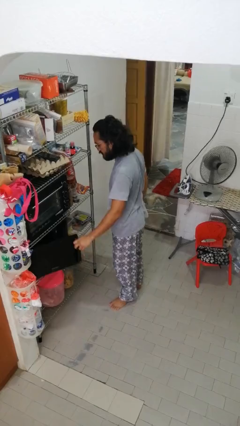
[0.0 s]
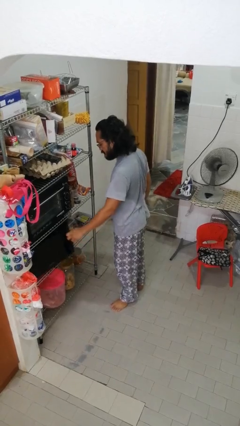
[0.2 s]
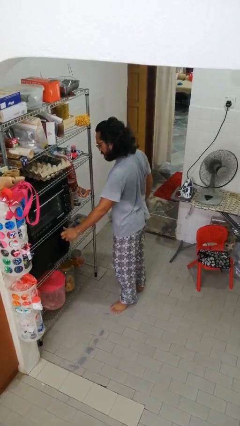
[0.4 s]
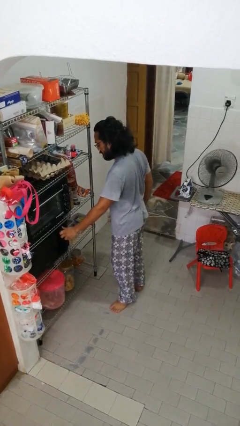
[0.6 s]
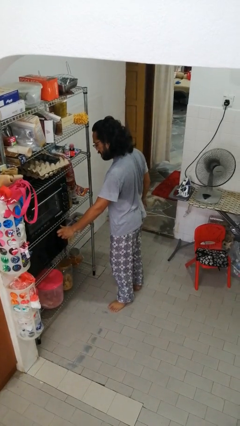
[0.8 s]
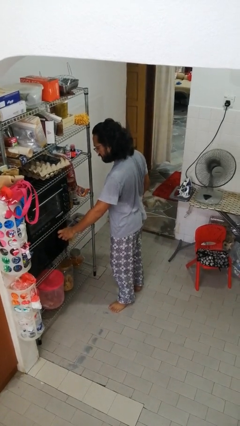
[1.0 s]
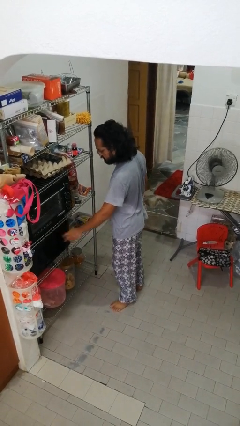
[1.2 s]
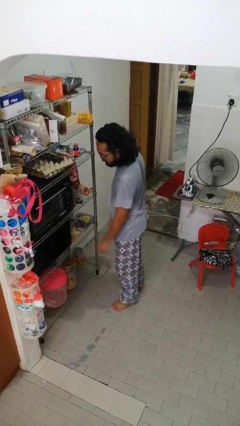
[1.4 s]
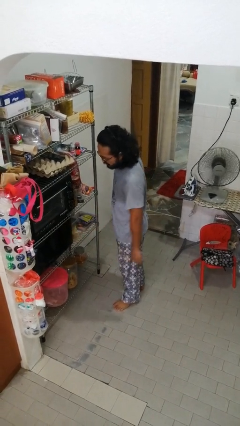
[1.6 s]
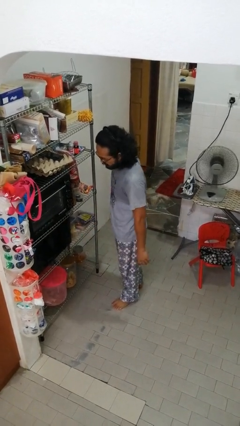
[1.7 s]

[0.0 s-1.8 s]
person closes microwave

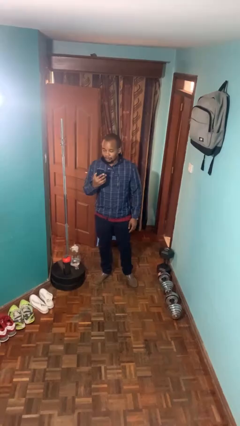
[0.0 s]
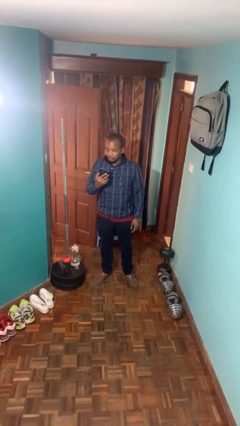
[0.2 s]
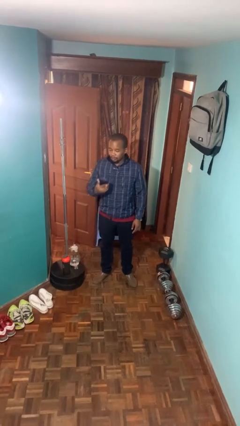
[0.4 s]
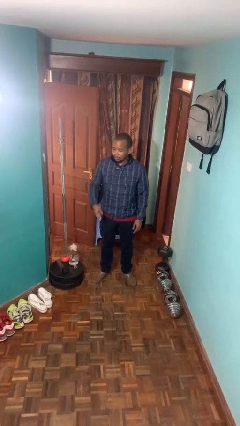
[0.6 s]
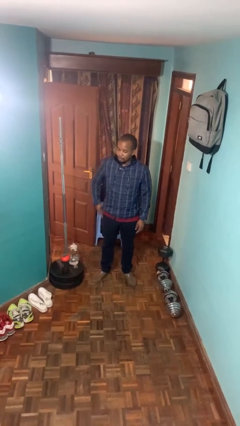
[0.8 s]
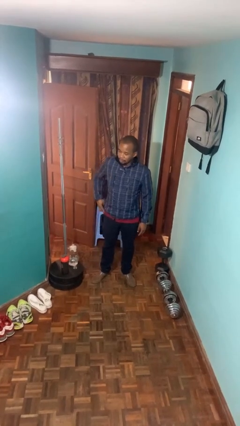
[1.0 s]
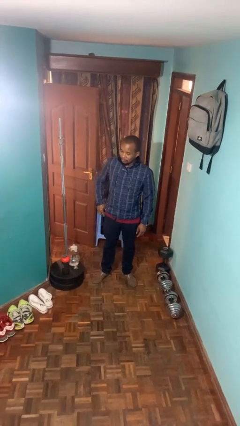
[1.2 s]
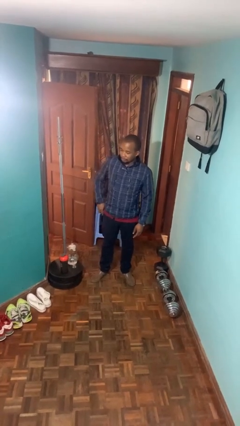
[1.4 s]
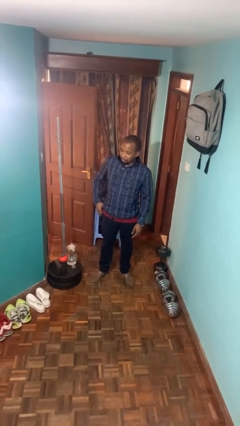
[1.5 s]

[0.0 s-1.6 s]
person puts phone into pocket

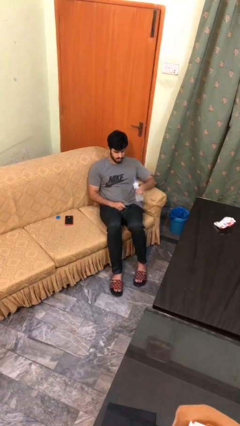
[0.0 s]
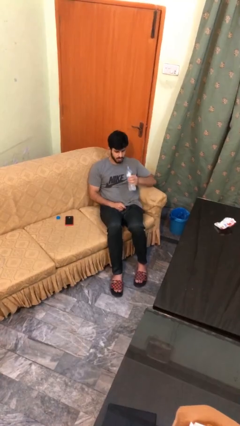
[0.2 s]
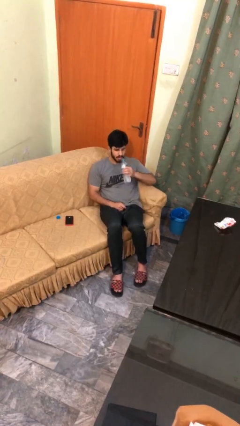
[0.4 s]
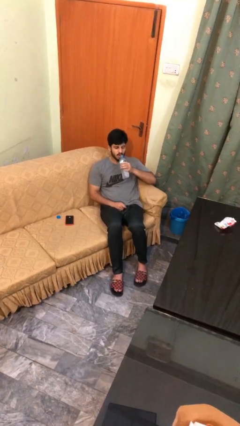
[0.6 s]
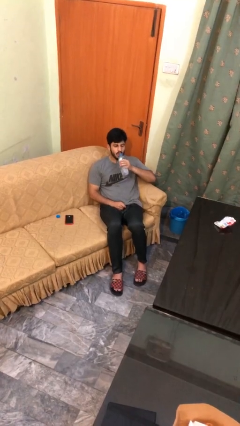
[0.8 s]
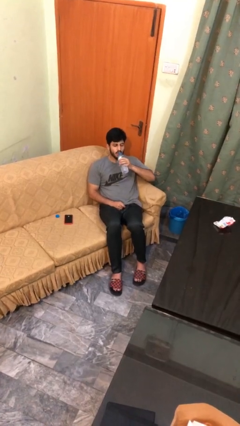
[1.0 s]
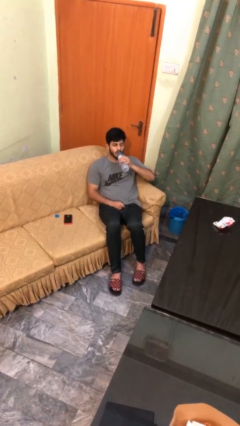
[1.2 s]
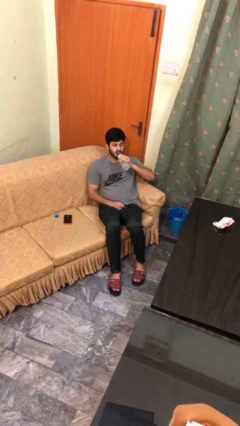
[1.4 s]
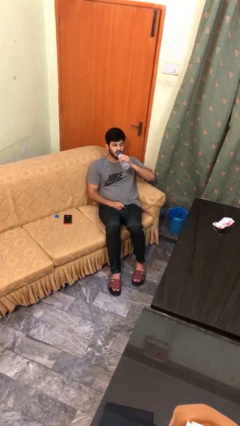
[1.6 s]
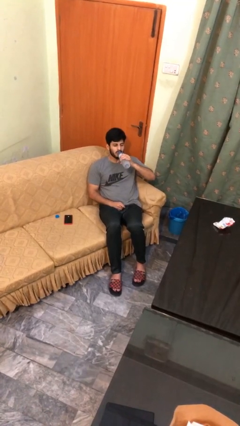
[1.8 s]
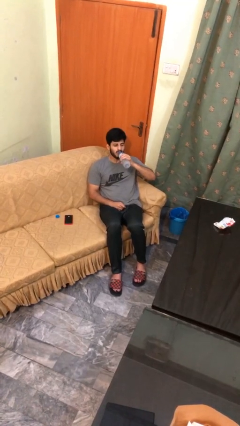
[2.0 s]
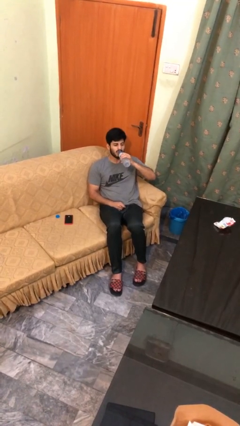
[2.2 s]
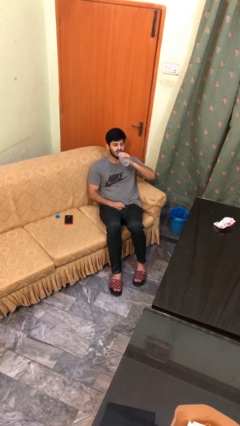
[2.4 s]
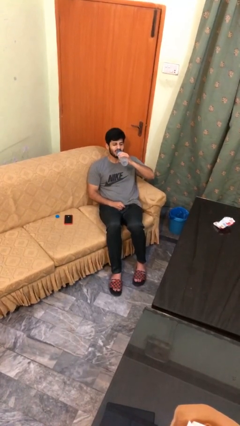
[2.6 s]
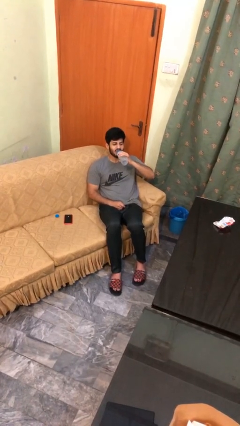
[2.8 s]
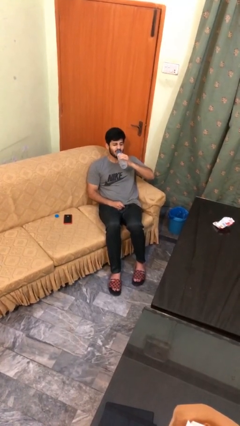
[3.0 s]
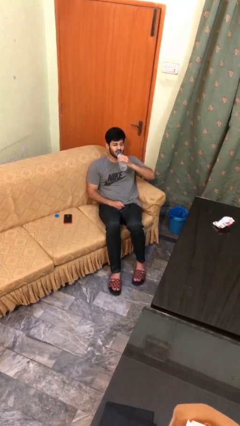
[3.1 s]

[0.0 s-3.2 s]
person drinks from bottle

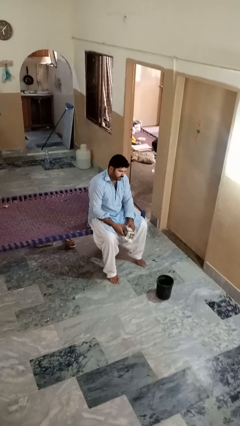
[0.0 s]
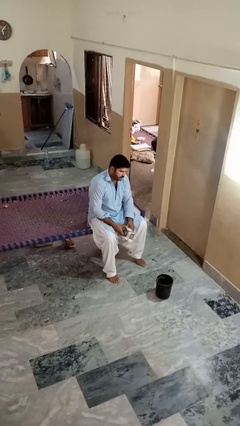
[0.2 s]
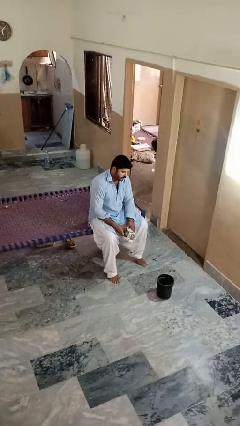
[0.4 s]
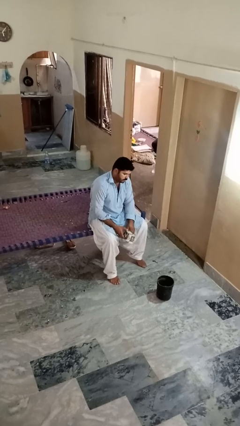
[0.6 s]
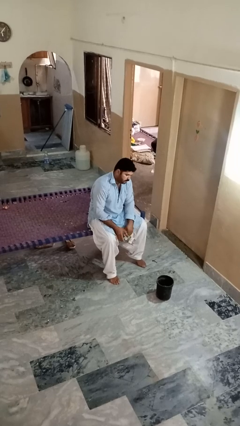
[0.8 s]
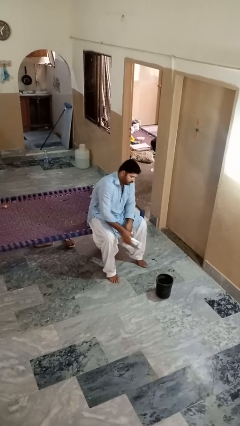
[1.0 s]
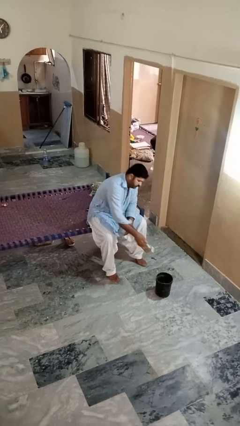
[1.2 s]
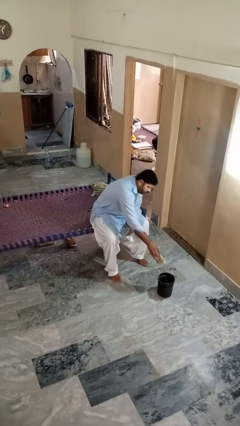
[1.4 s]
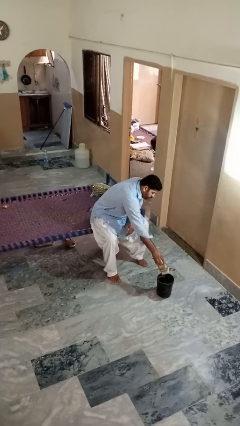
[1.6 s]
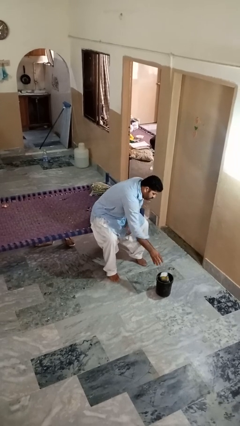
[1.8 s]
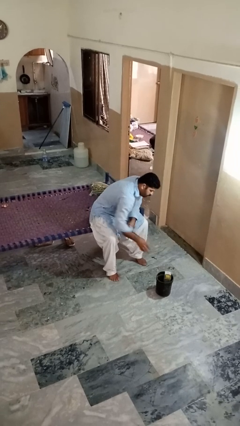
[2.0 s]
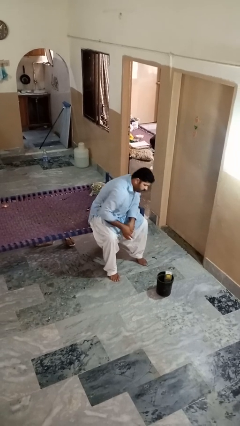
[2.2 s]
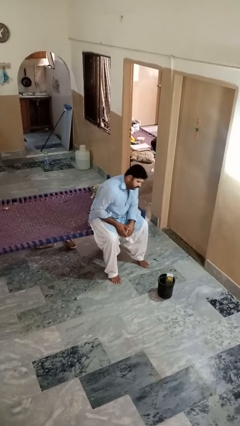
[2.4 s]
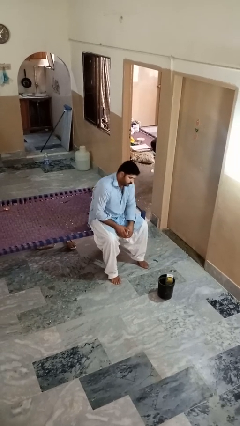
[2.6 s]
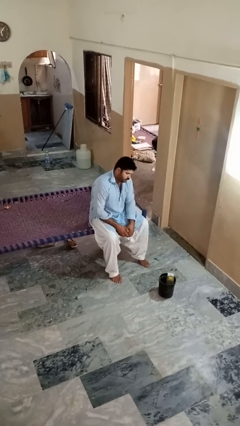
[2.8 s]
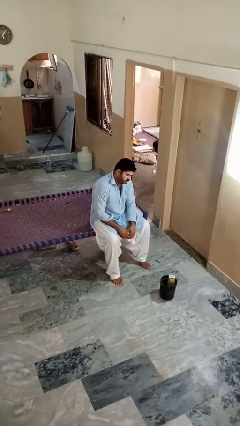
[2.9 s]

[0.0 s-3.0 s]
person puts object into basket

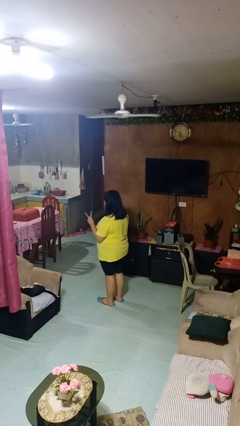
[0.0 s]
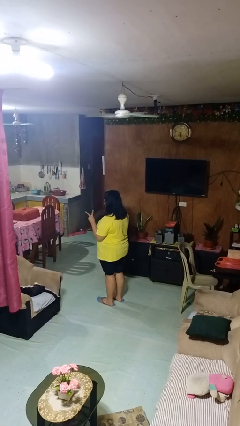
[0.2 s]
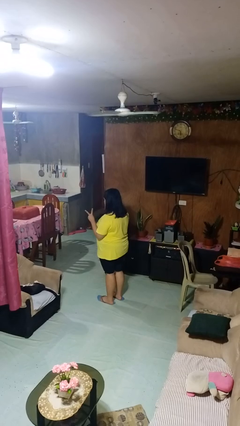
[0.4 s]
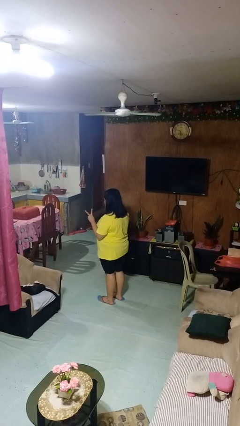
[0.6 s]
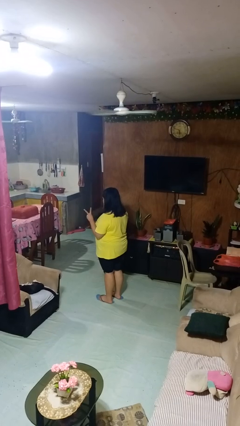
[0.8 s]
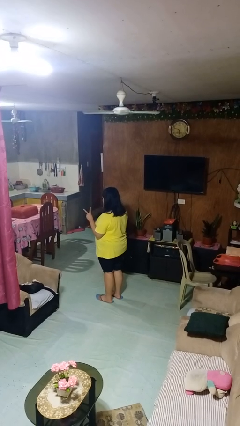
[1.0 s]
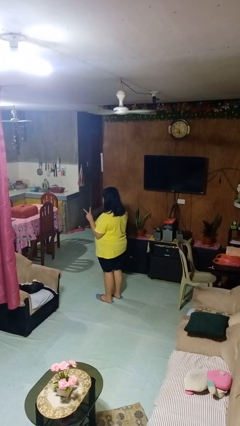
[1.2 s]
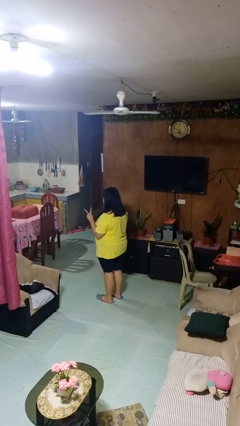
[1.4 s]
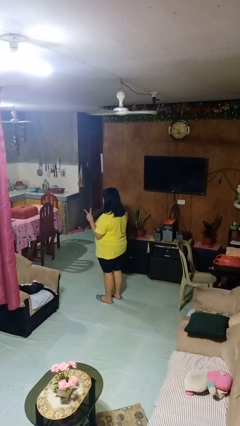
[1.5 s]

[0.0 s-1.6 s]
person gestures peace

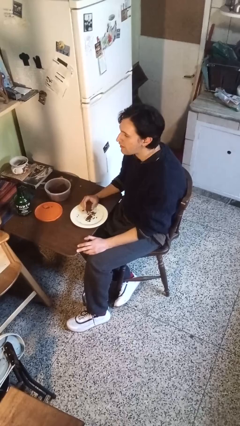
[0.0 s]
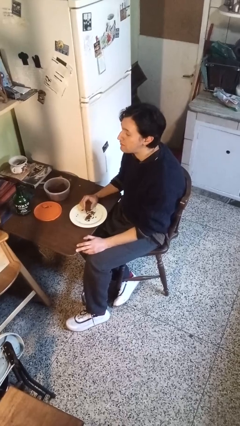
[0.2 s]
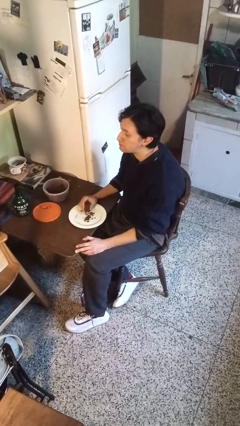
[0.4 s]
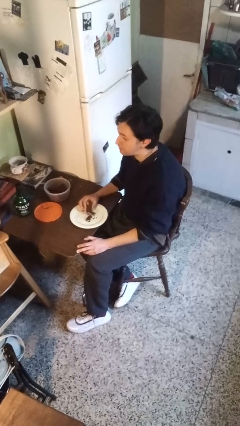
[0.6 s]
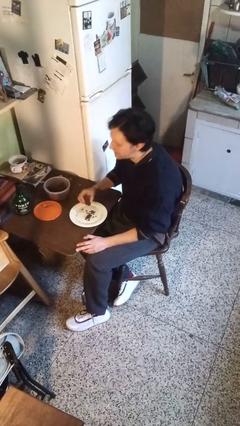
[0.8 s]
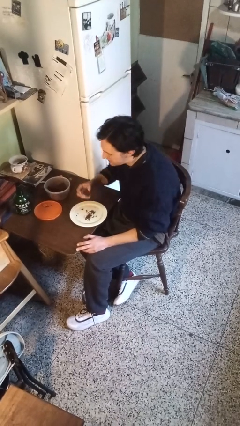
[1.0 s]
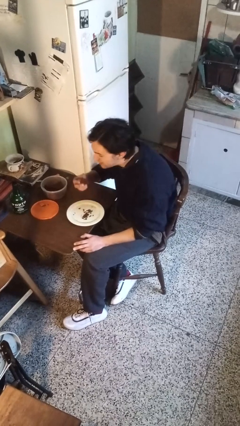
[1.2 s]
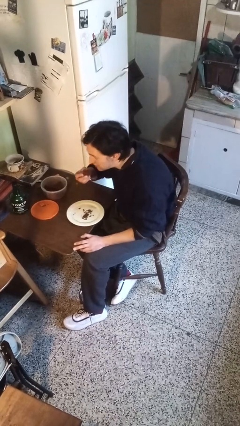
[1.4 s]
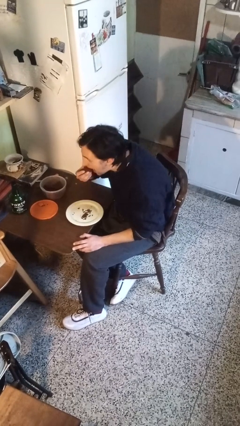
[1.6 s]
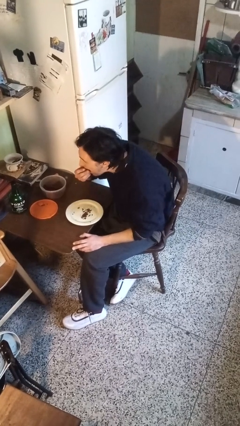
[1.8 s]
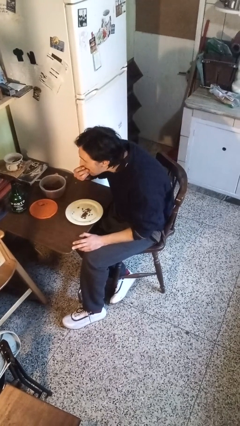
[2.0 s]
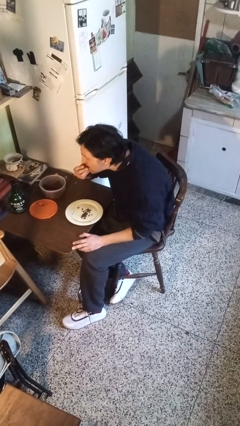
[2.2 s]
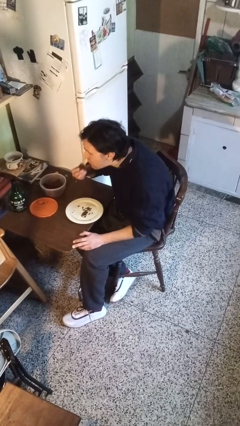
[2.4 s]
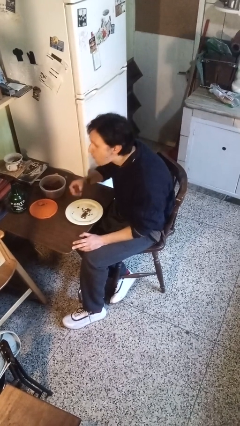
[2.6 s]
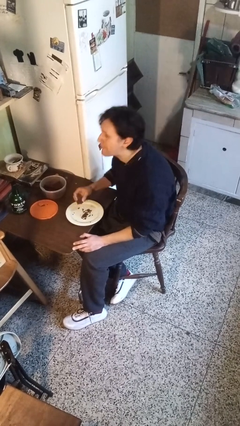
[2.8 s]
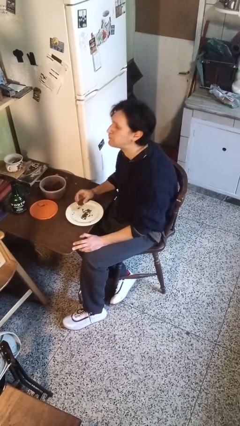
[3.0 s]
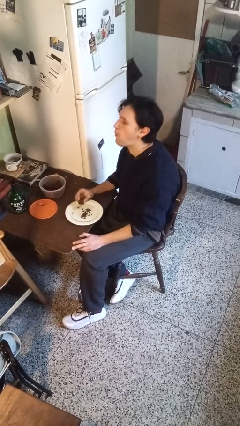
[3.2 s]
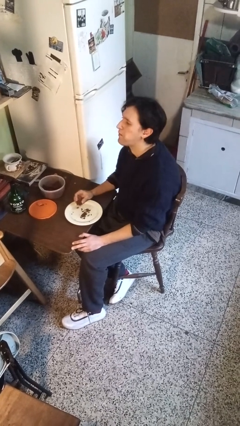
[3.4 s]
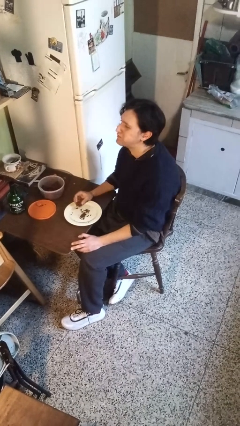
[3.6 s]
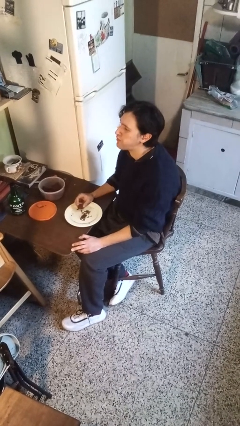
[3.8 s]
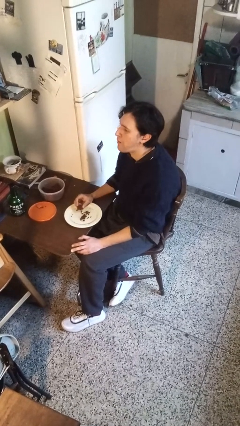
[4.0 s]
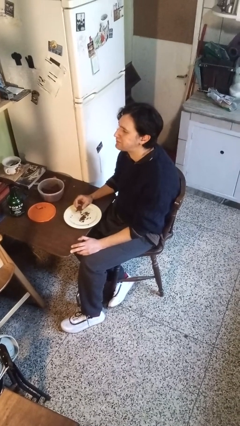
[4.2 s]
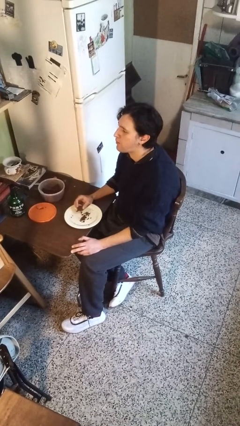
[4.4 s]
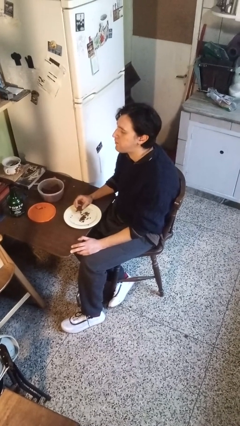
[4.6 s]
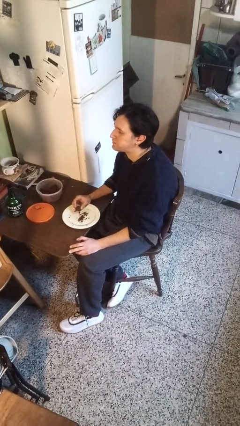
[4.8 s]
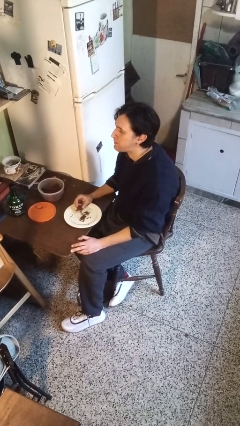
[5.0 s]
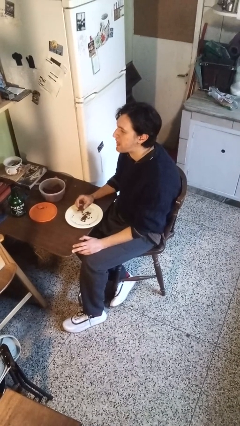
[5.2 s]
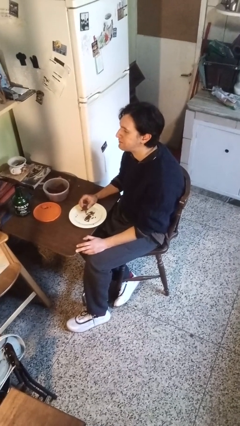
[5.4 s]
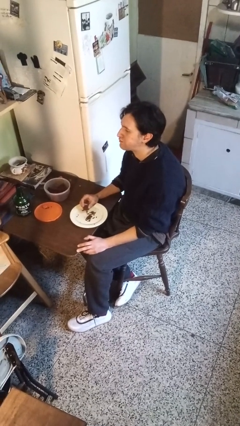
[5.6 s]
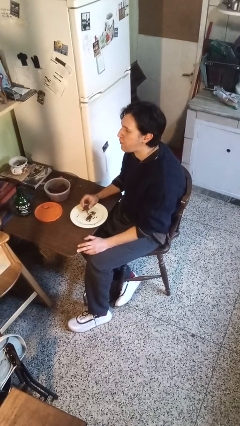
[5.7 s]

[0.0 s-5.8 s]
person eats with hands
